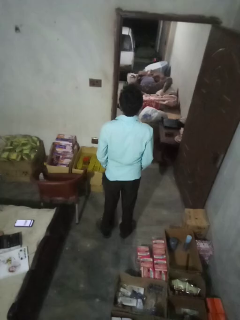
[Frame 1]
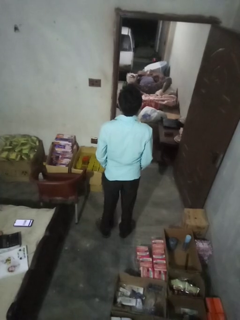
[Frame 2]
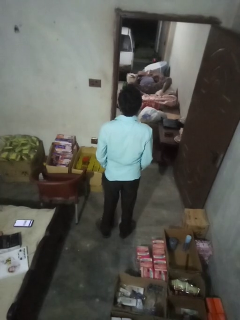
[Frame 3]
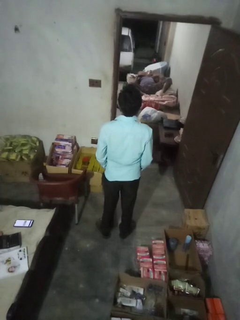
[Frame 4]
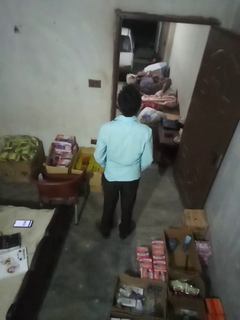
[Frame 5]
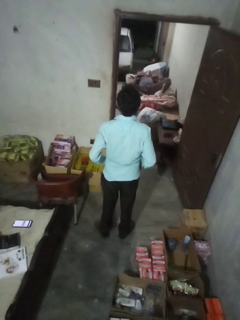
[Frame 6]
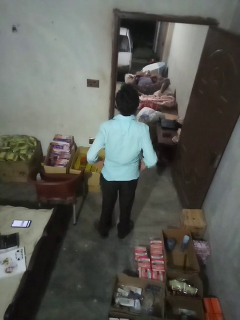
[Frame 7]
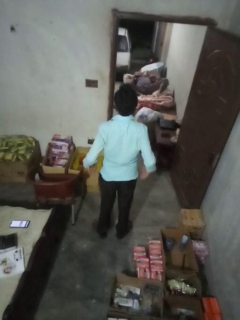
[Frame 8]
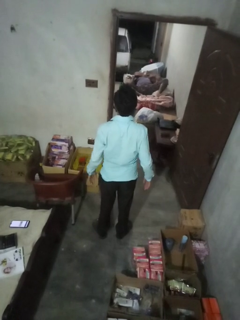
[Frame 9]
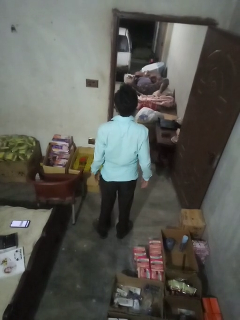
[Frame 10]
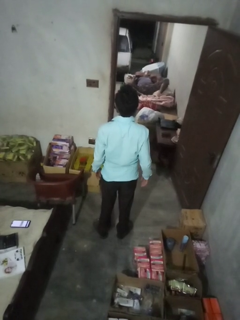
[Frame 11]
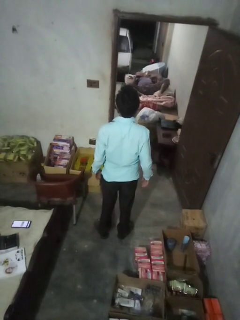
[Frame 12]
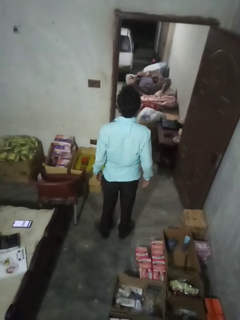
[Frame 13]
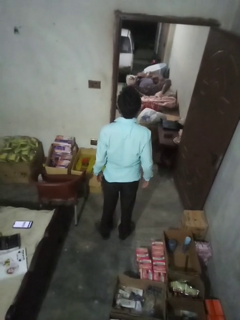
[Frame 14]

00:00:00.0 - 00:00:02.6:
person puts hands in back pockets

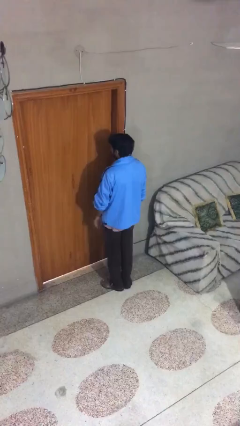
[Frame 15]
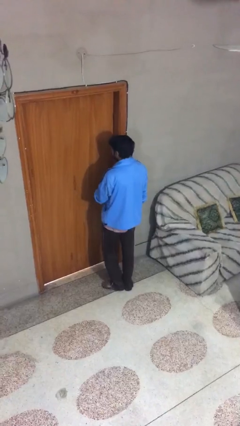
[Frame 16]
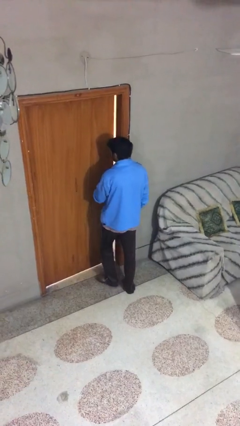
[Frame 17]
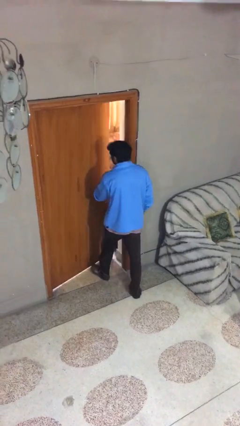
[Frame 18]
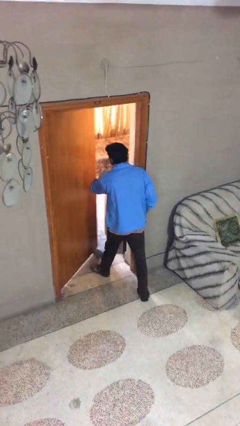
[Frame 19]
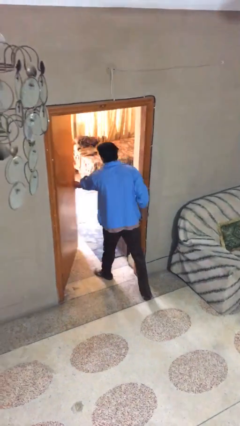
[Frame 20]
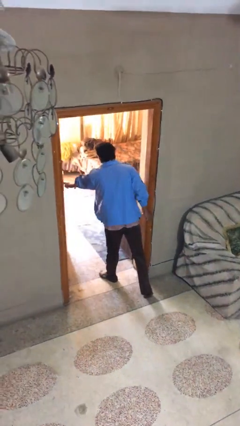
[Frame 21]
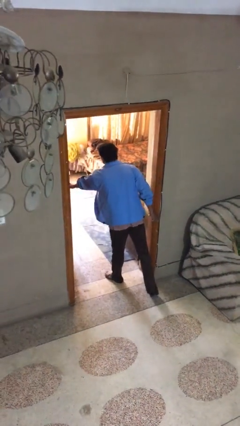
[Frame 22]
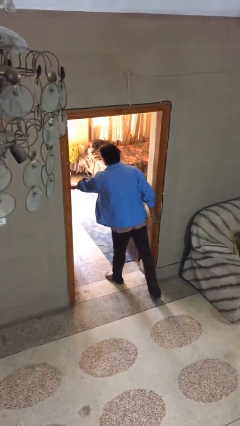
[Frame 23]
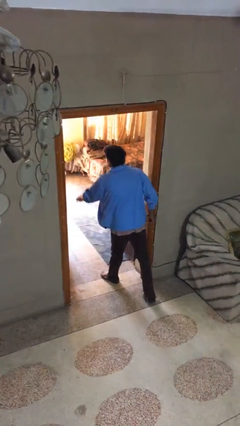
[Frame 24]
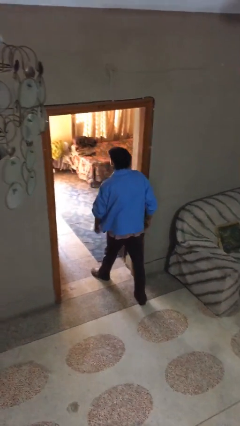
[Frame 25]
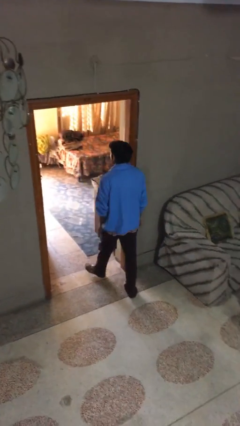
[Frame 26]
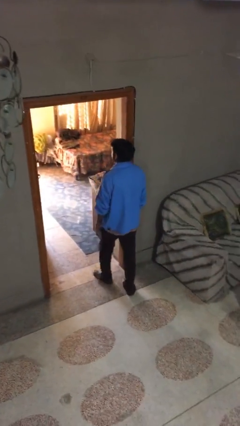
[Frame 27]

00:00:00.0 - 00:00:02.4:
person opens facility door

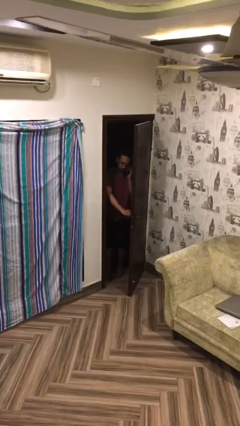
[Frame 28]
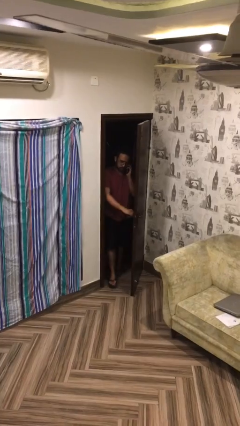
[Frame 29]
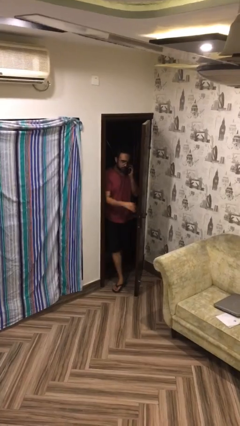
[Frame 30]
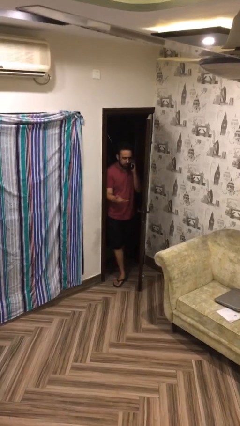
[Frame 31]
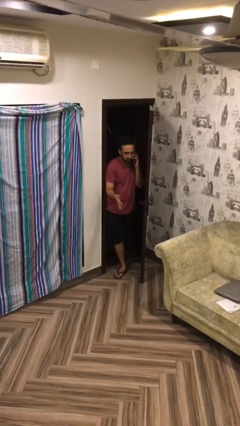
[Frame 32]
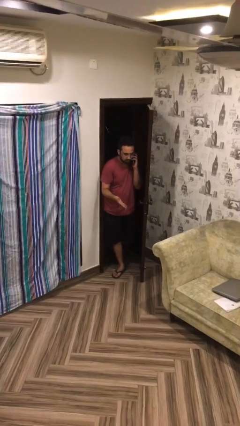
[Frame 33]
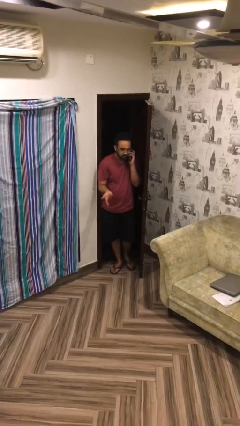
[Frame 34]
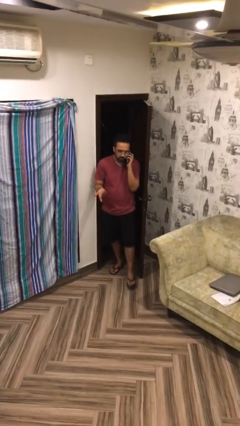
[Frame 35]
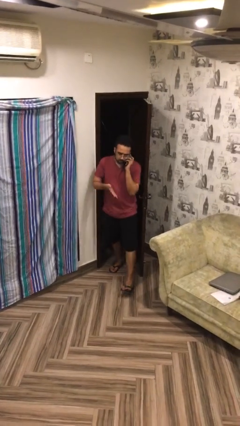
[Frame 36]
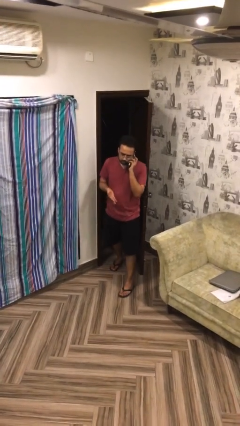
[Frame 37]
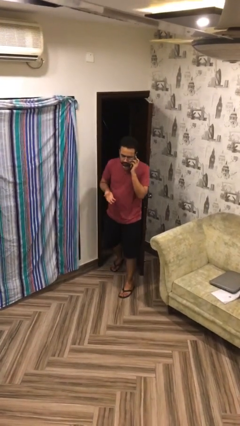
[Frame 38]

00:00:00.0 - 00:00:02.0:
person enters scene through structure

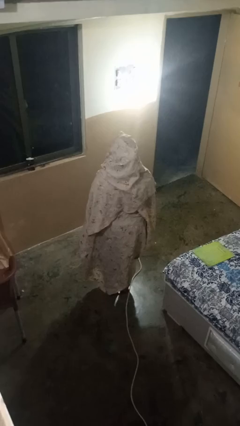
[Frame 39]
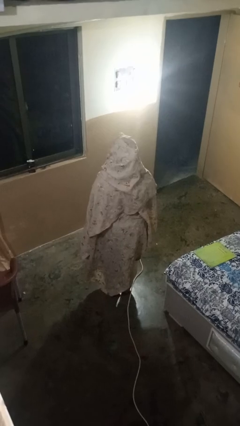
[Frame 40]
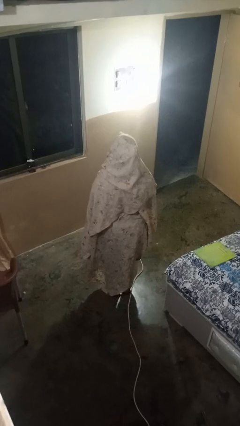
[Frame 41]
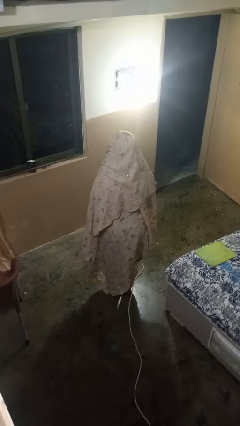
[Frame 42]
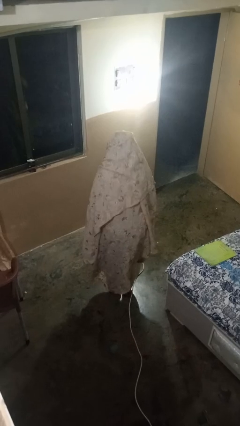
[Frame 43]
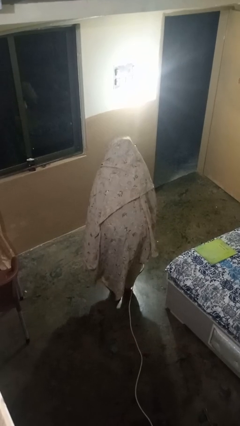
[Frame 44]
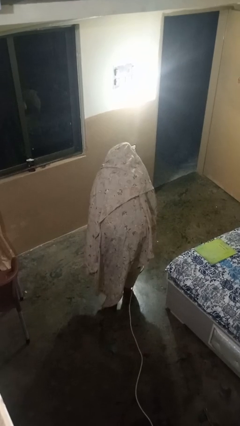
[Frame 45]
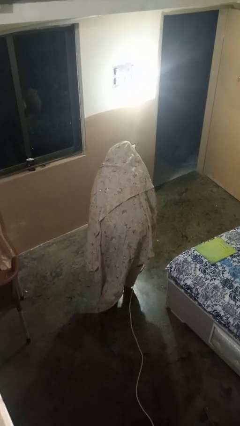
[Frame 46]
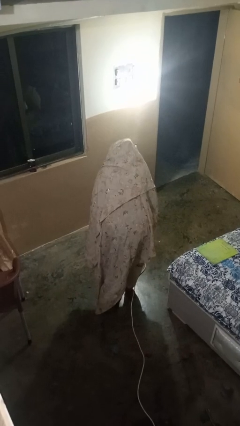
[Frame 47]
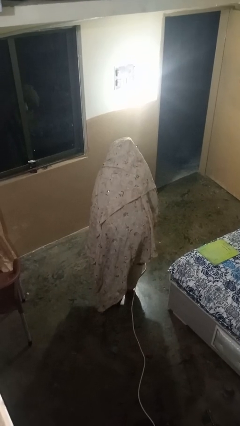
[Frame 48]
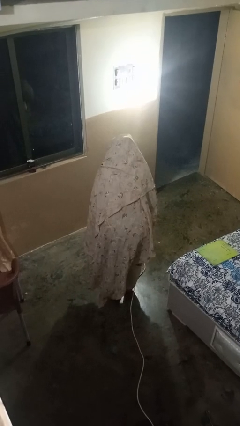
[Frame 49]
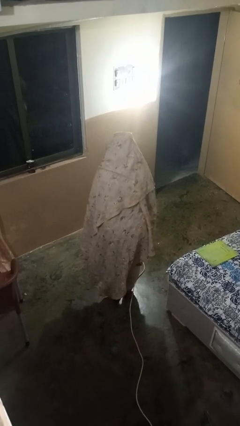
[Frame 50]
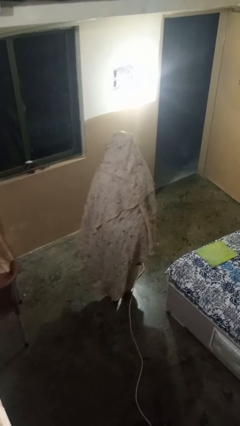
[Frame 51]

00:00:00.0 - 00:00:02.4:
person bows

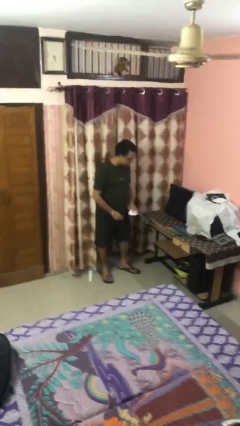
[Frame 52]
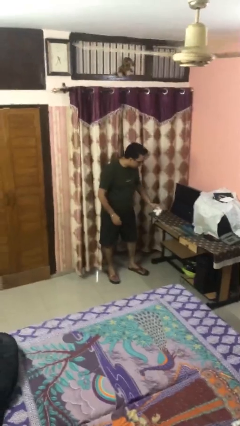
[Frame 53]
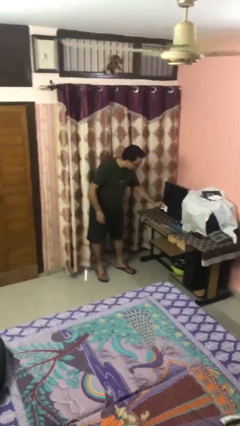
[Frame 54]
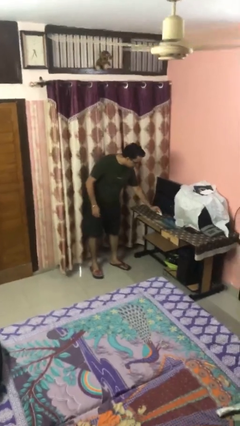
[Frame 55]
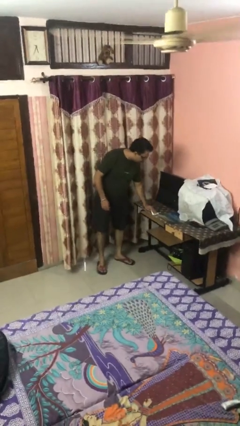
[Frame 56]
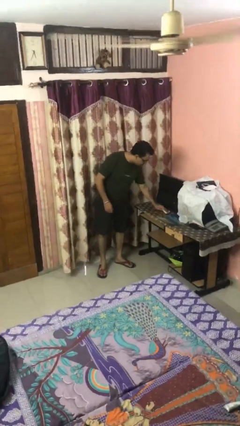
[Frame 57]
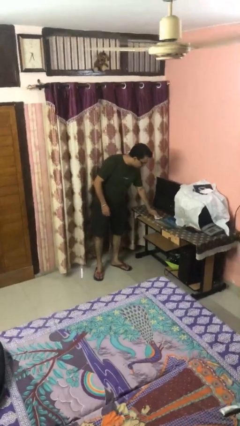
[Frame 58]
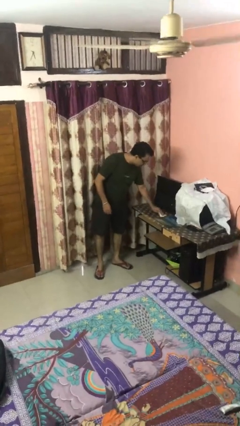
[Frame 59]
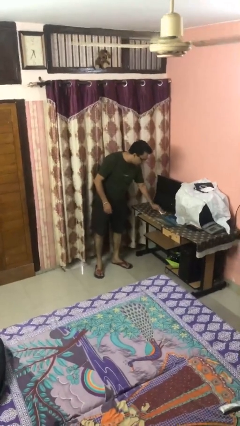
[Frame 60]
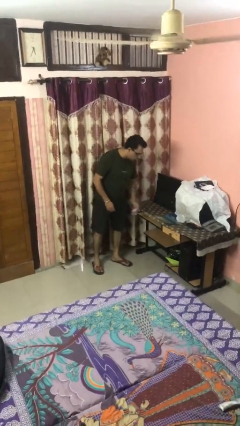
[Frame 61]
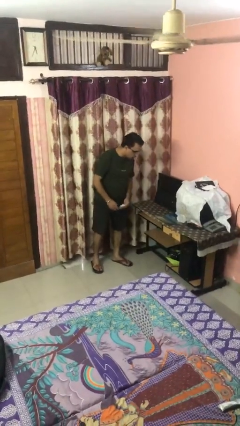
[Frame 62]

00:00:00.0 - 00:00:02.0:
person cleans table with rag

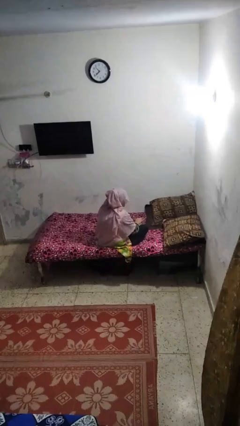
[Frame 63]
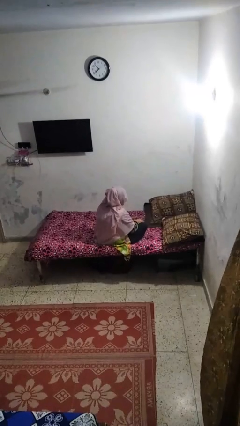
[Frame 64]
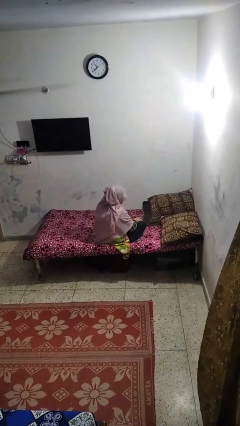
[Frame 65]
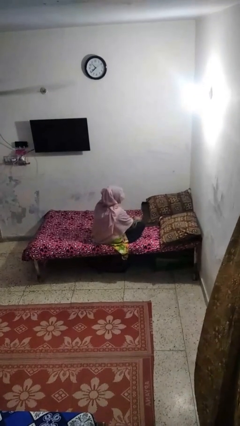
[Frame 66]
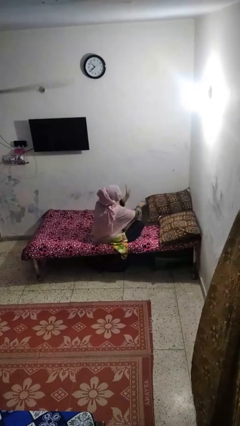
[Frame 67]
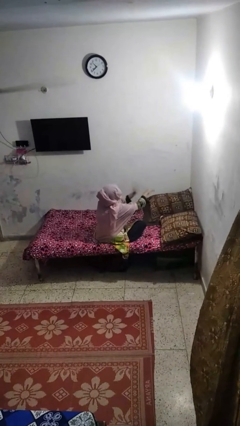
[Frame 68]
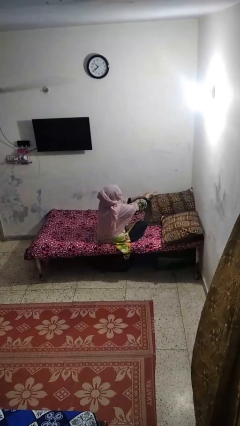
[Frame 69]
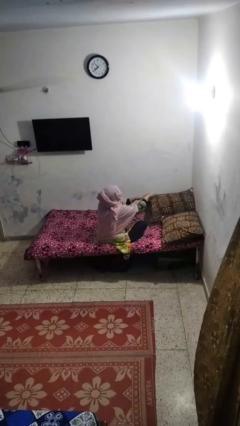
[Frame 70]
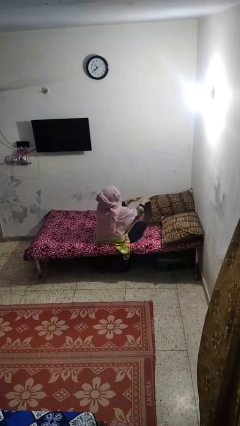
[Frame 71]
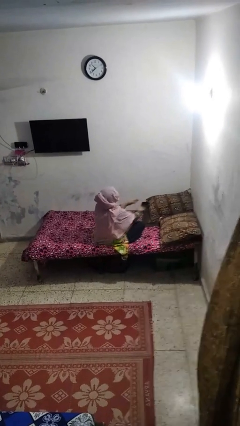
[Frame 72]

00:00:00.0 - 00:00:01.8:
person swats bug

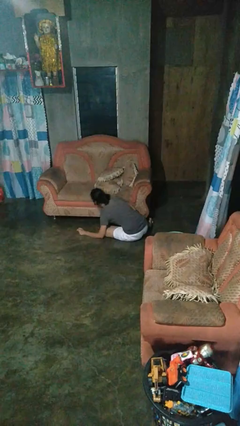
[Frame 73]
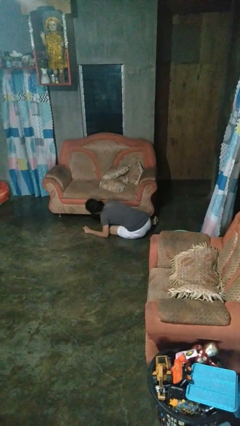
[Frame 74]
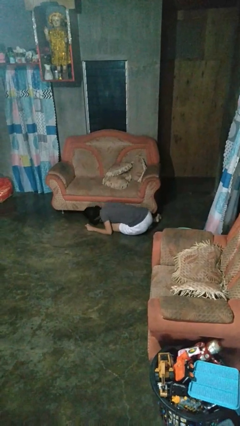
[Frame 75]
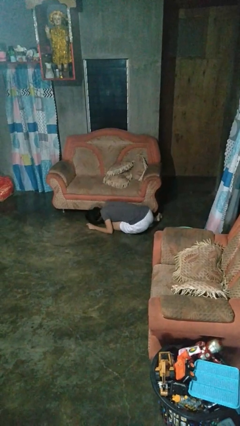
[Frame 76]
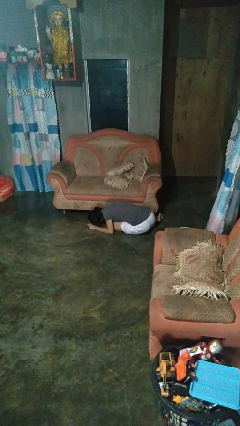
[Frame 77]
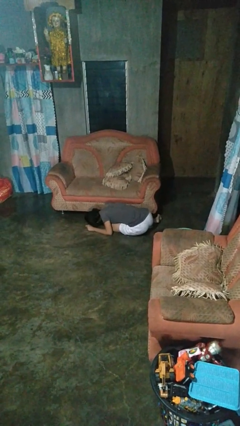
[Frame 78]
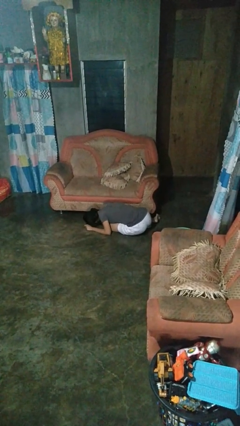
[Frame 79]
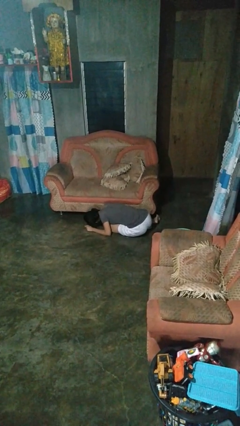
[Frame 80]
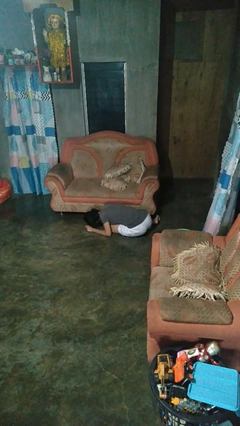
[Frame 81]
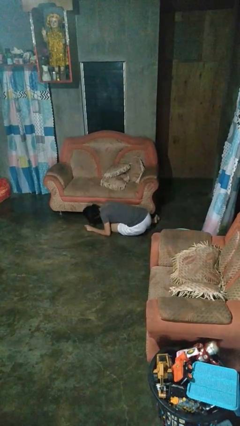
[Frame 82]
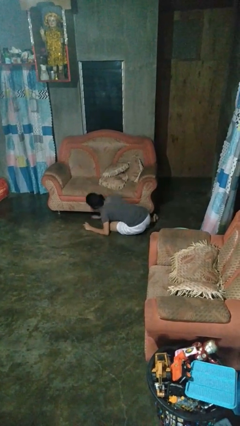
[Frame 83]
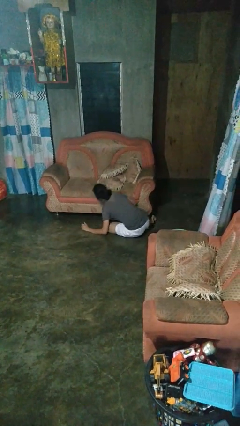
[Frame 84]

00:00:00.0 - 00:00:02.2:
person searches under couch

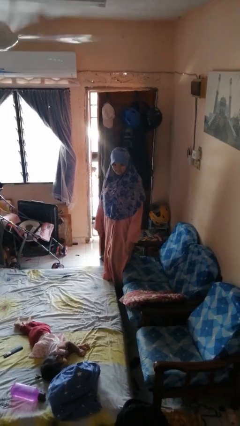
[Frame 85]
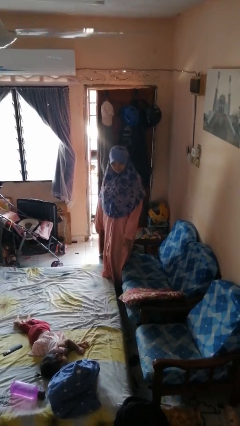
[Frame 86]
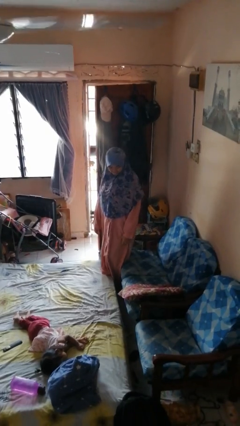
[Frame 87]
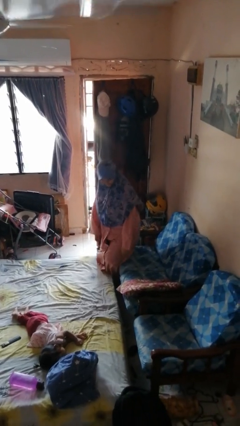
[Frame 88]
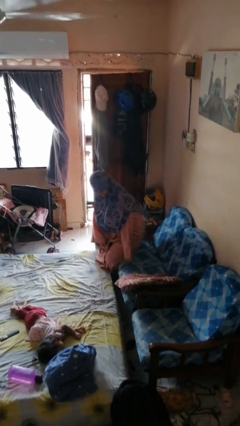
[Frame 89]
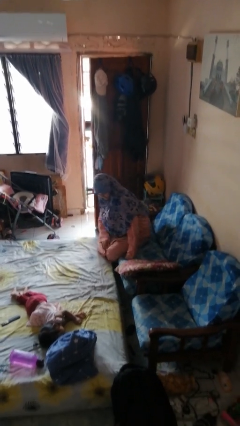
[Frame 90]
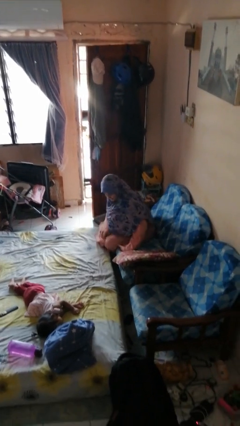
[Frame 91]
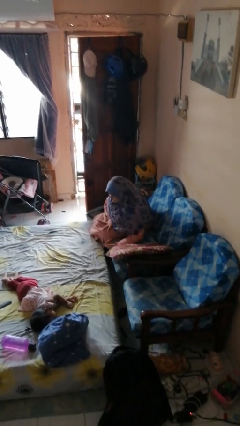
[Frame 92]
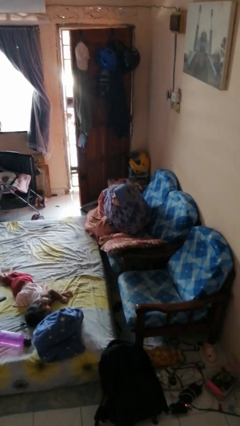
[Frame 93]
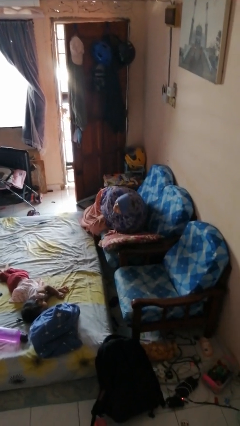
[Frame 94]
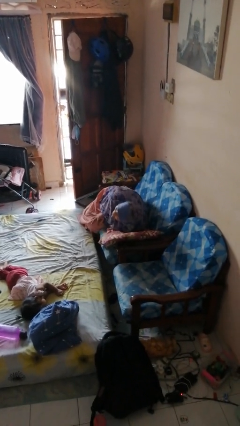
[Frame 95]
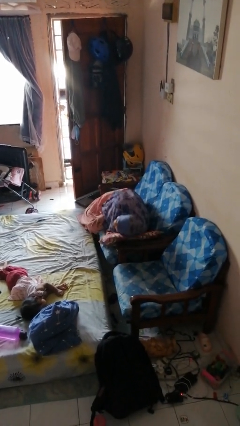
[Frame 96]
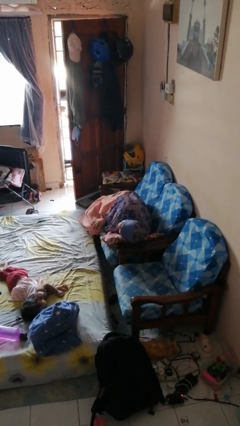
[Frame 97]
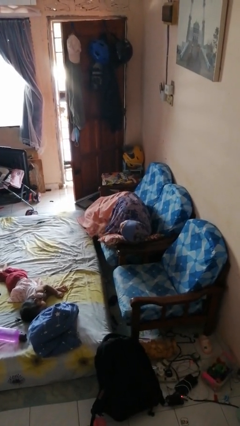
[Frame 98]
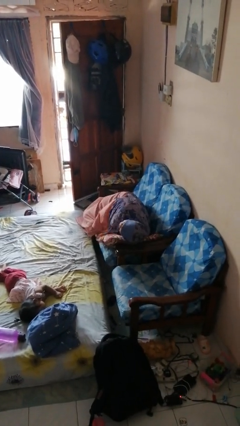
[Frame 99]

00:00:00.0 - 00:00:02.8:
person lies down on couch
